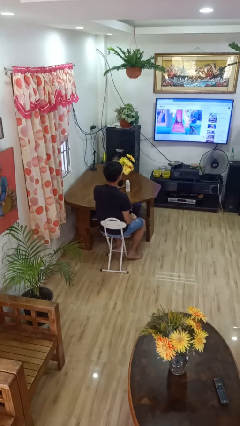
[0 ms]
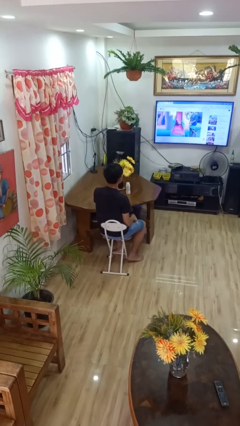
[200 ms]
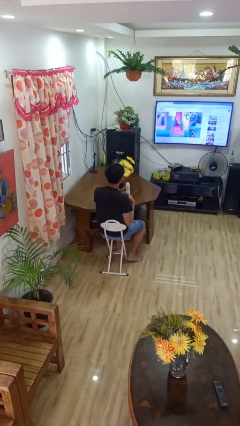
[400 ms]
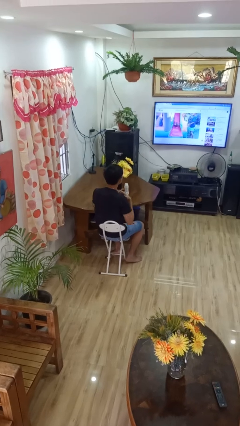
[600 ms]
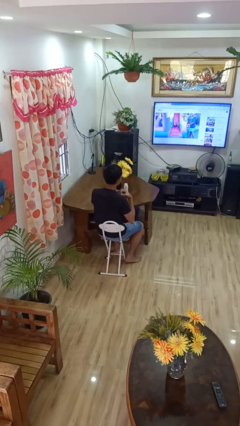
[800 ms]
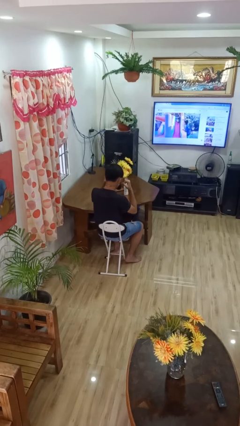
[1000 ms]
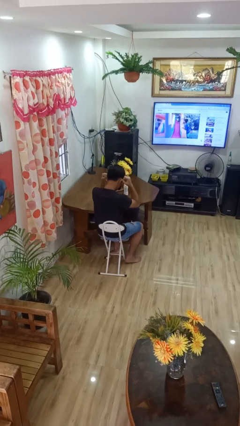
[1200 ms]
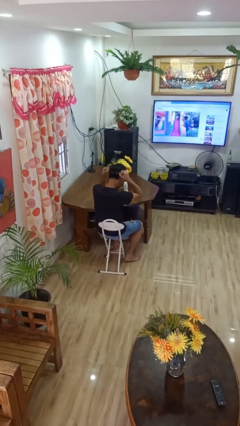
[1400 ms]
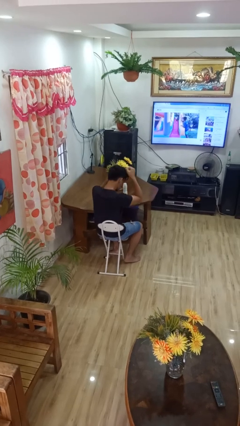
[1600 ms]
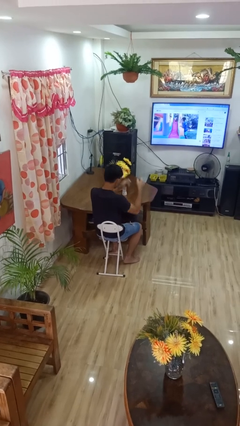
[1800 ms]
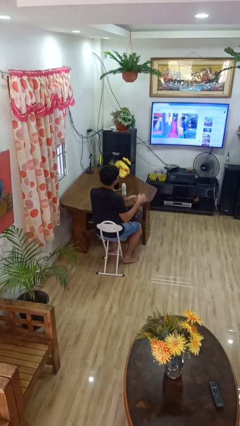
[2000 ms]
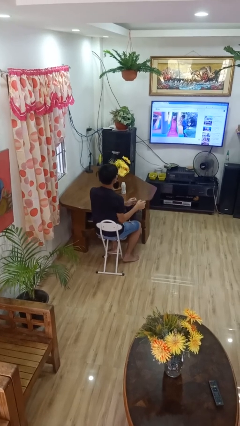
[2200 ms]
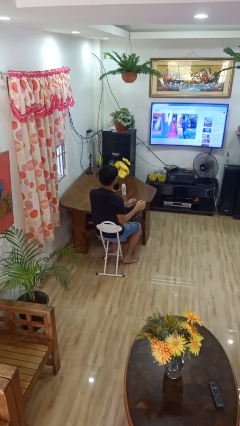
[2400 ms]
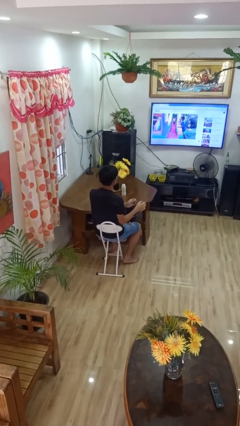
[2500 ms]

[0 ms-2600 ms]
person takes off necklace

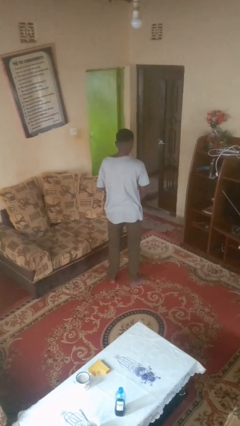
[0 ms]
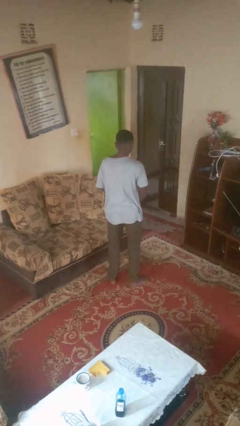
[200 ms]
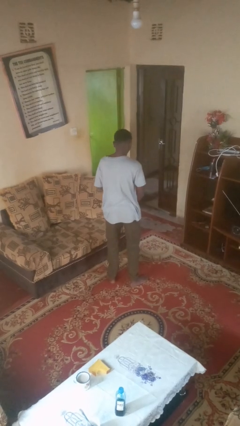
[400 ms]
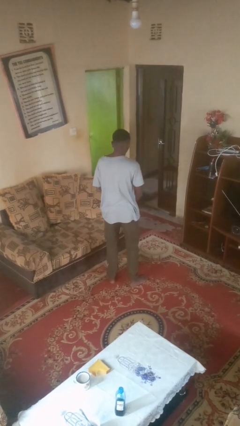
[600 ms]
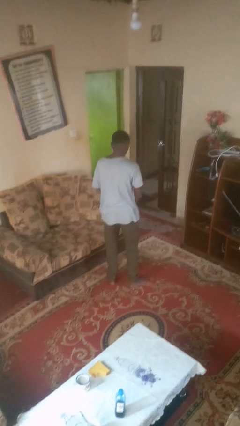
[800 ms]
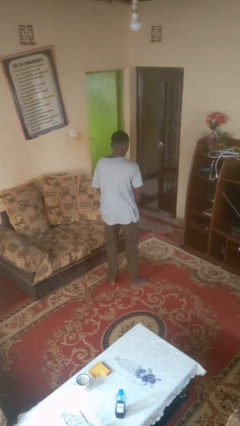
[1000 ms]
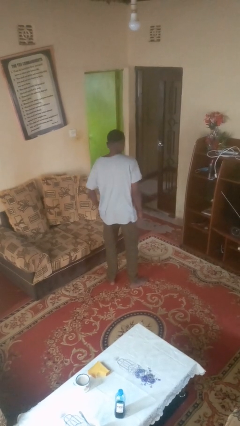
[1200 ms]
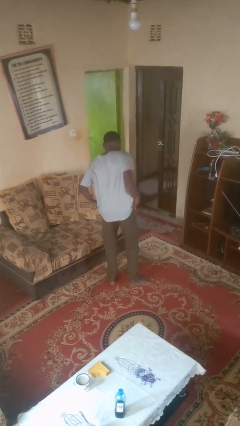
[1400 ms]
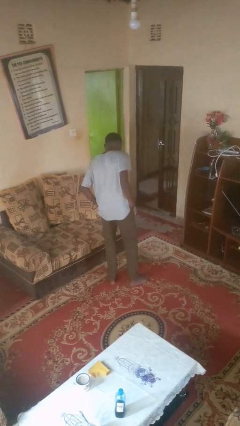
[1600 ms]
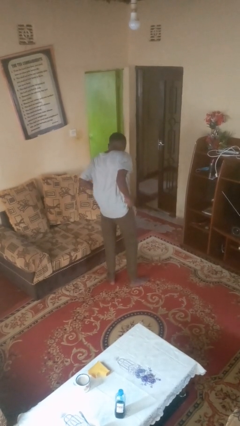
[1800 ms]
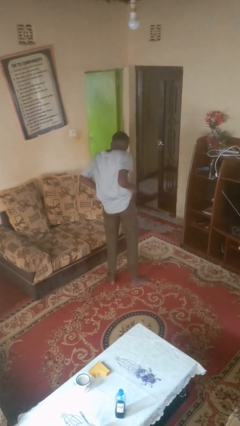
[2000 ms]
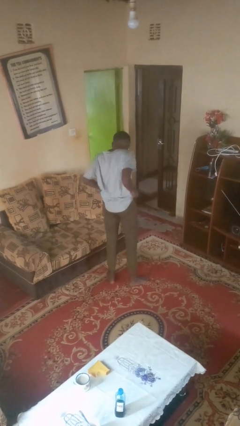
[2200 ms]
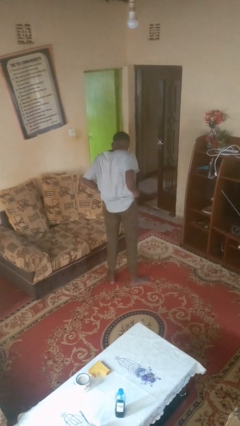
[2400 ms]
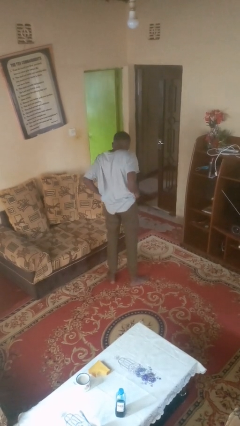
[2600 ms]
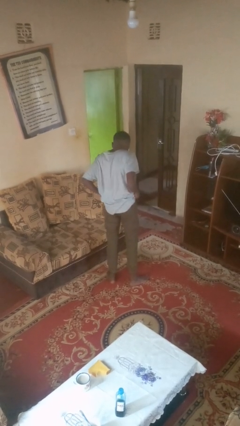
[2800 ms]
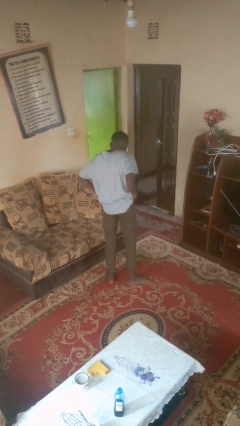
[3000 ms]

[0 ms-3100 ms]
person washes dish

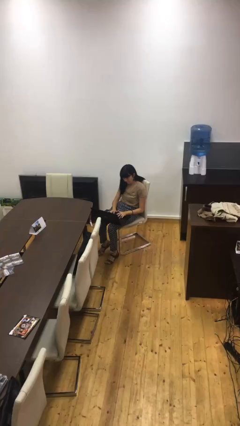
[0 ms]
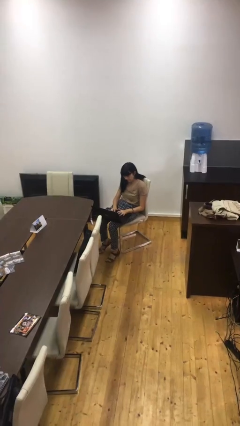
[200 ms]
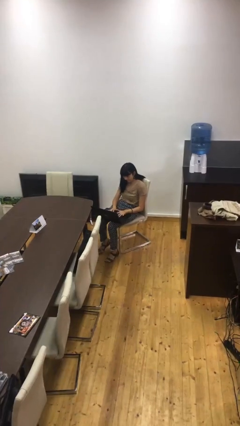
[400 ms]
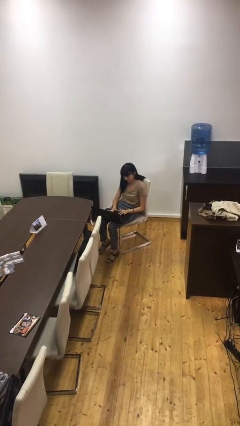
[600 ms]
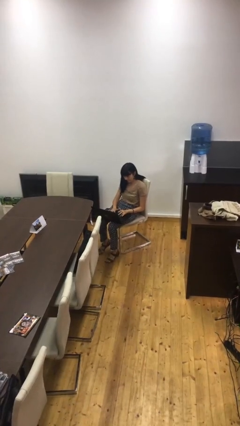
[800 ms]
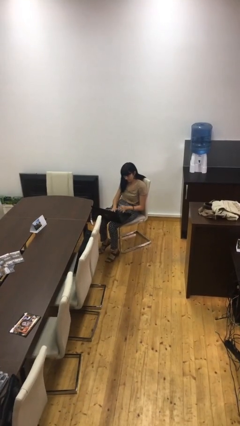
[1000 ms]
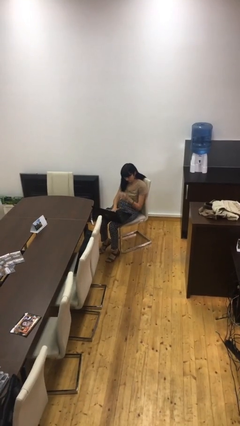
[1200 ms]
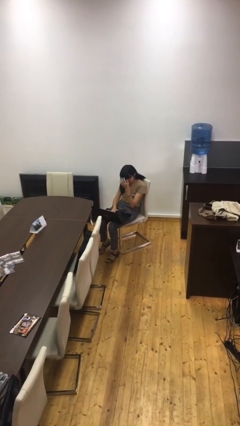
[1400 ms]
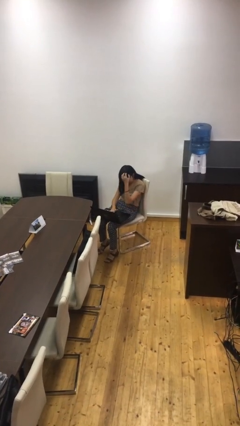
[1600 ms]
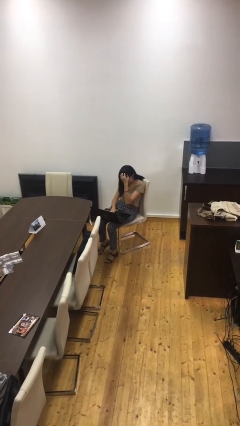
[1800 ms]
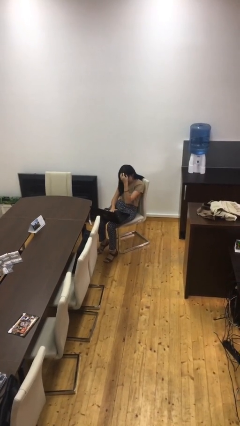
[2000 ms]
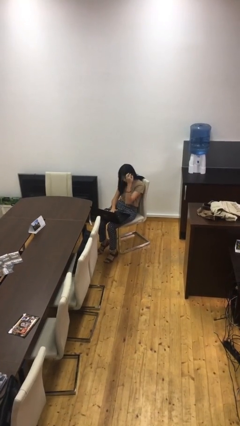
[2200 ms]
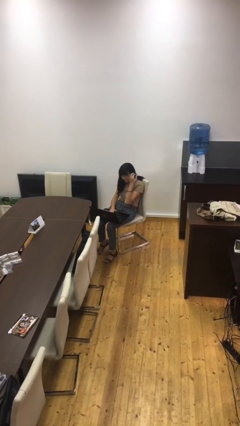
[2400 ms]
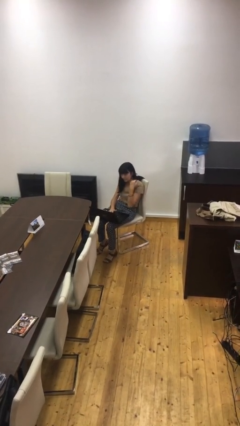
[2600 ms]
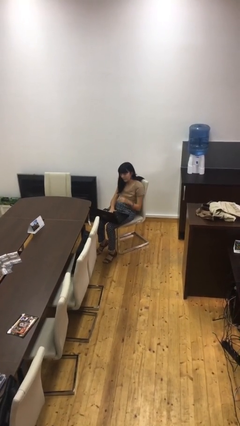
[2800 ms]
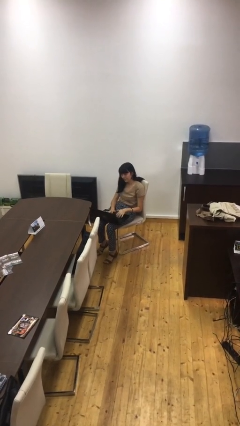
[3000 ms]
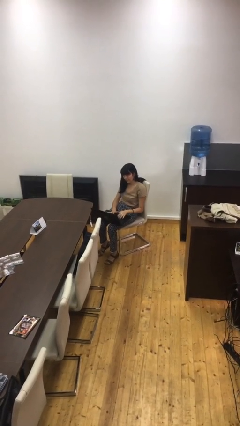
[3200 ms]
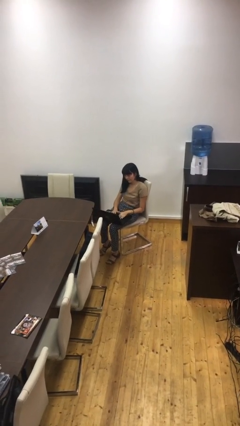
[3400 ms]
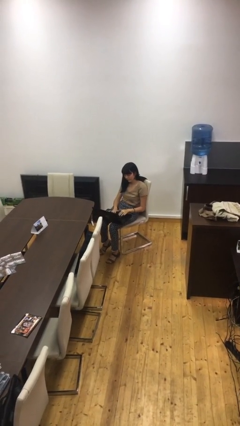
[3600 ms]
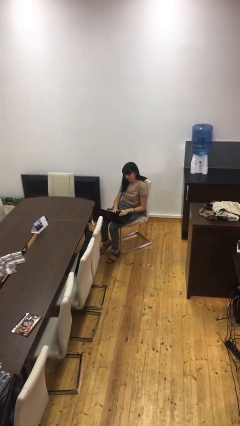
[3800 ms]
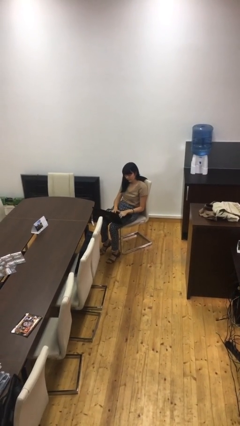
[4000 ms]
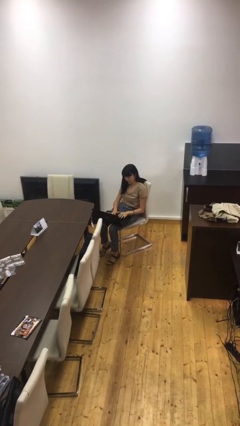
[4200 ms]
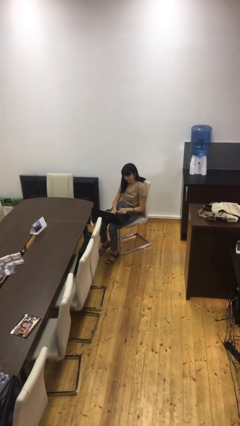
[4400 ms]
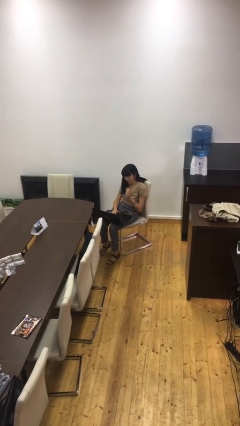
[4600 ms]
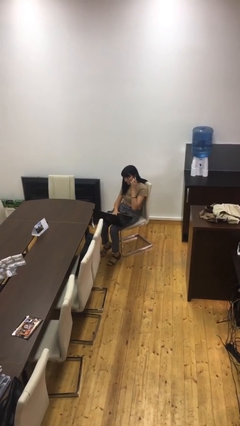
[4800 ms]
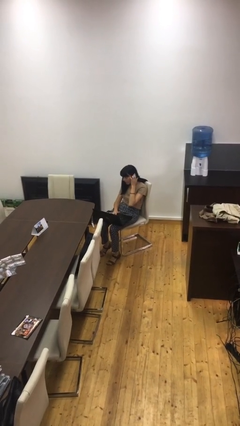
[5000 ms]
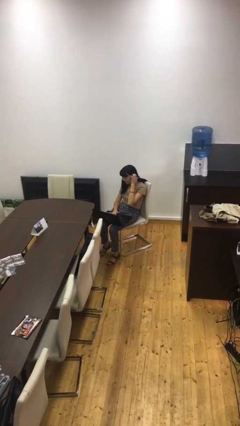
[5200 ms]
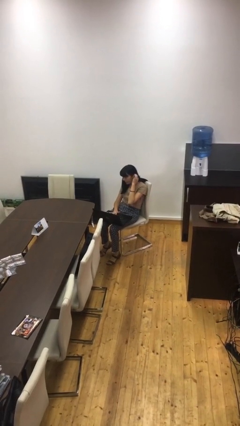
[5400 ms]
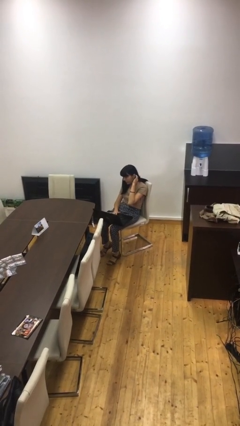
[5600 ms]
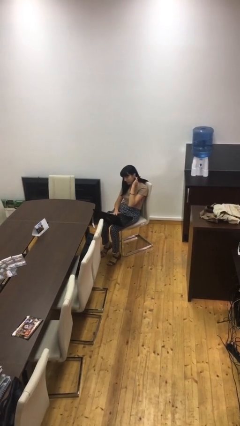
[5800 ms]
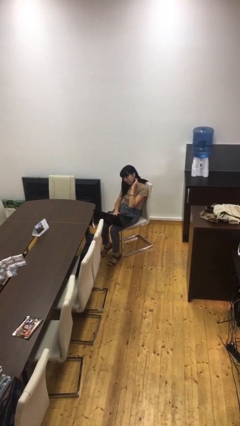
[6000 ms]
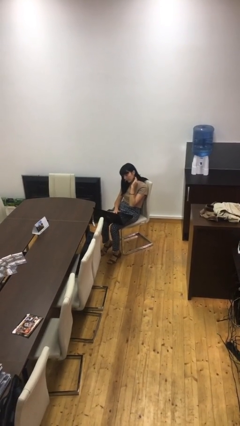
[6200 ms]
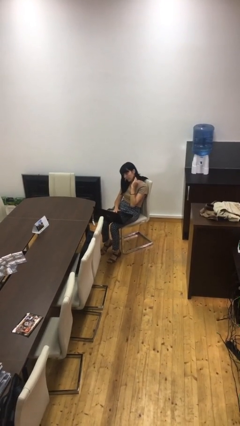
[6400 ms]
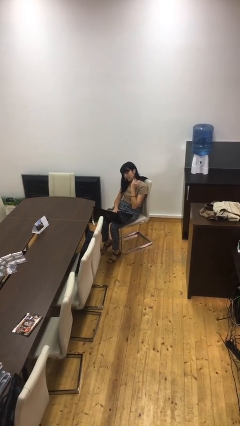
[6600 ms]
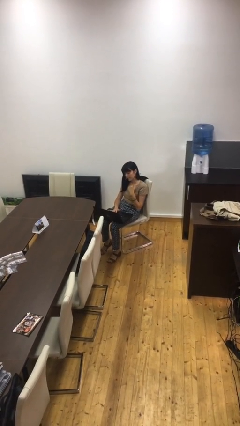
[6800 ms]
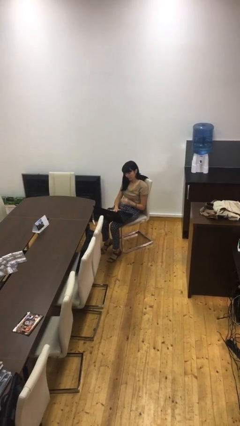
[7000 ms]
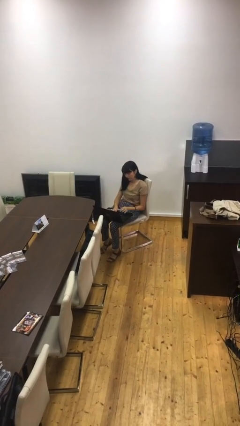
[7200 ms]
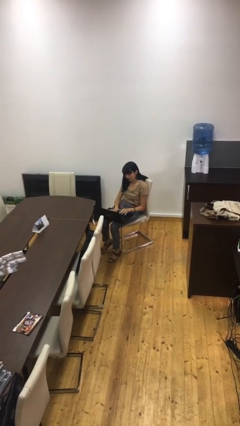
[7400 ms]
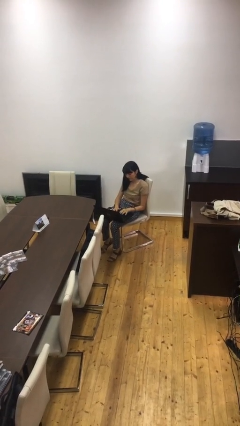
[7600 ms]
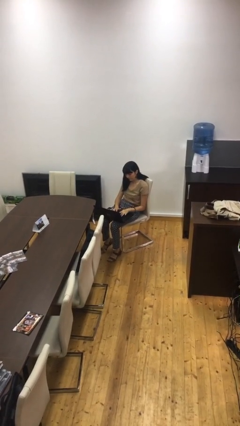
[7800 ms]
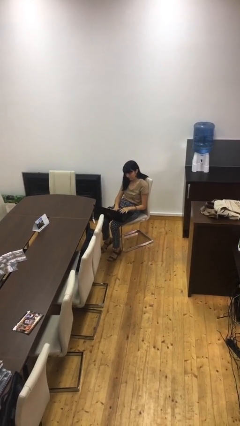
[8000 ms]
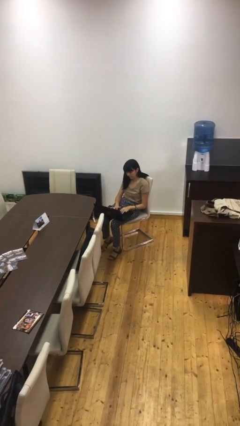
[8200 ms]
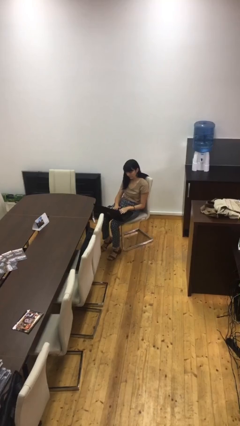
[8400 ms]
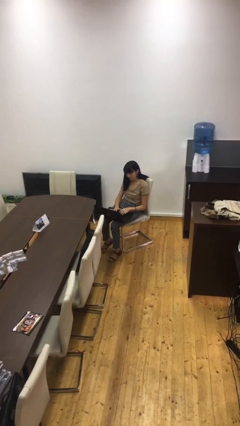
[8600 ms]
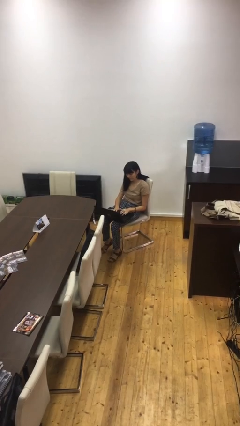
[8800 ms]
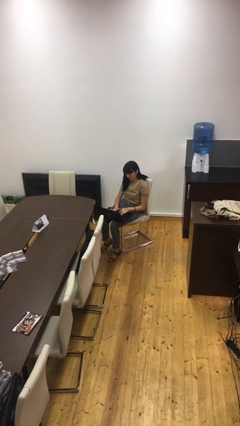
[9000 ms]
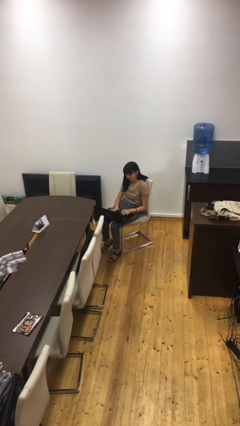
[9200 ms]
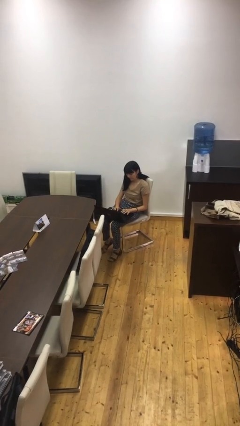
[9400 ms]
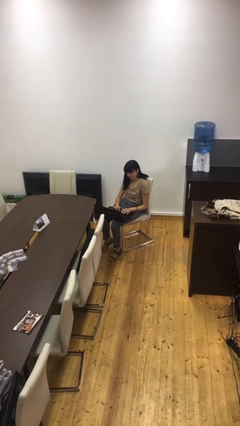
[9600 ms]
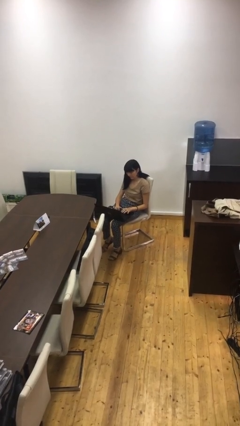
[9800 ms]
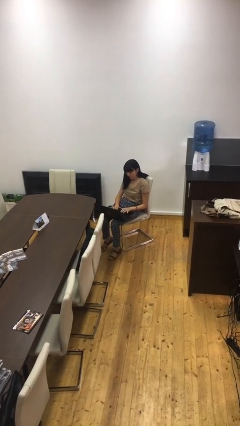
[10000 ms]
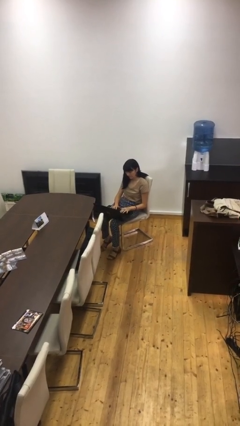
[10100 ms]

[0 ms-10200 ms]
person interacts with laptop

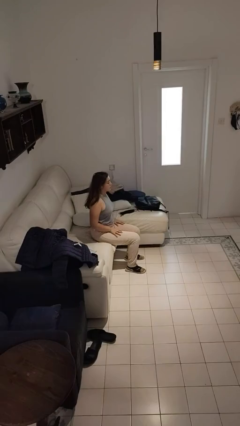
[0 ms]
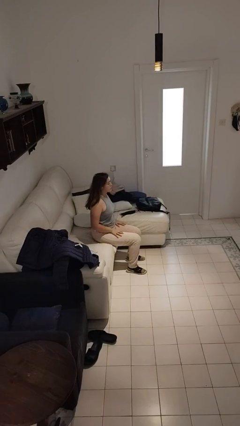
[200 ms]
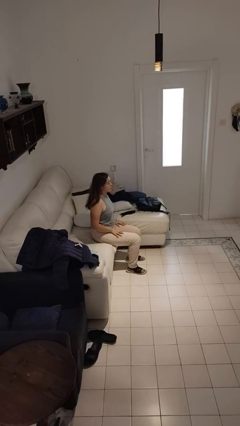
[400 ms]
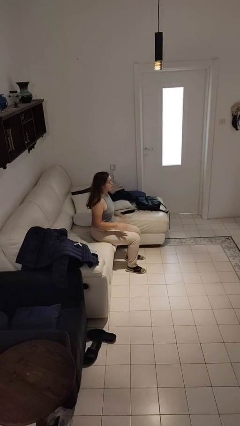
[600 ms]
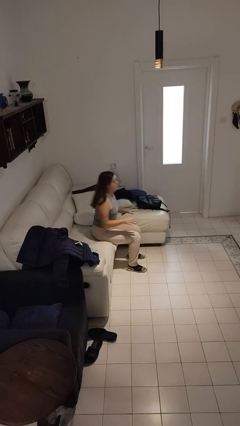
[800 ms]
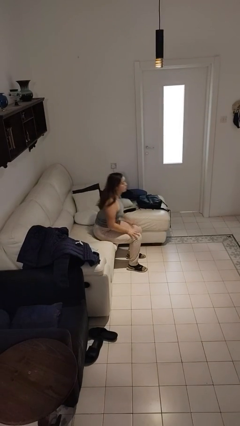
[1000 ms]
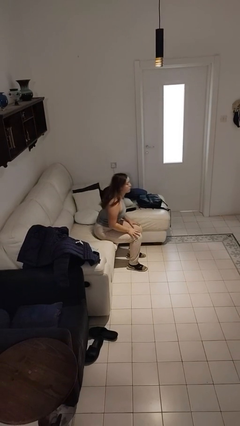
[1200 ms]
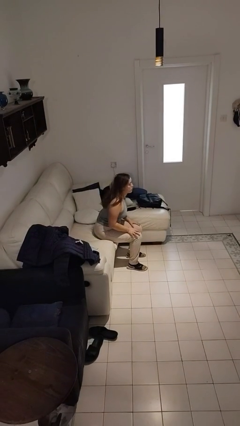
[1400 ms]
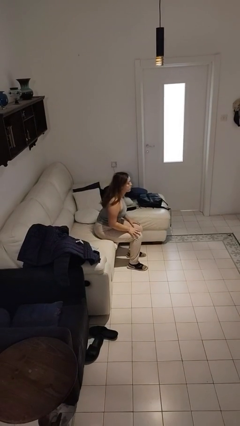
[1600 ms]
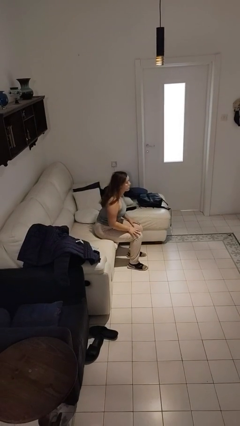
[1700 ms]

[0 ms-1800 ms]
person slaps hands on thighs

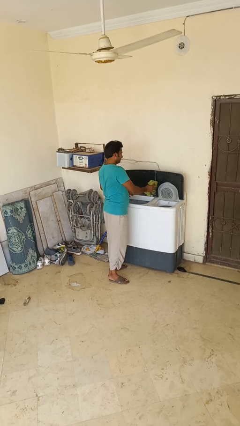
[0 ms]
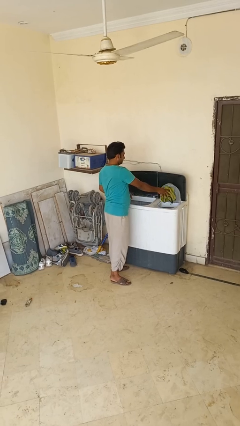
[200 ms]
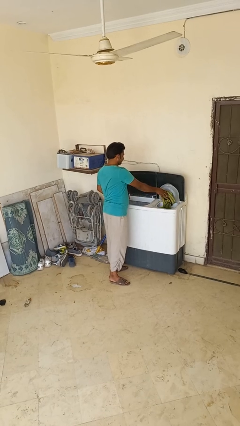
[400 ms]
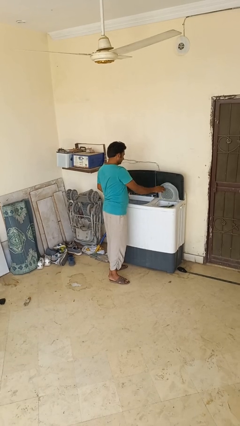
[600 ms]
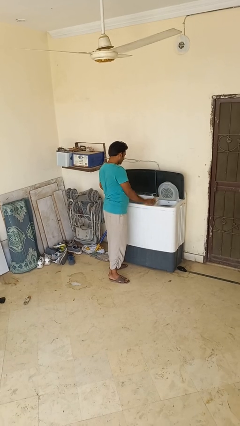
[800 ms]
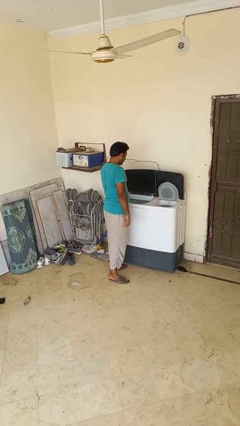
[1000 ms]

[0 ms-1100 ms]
person loads dryer
